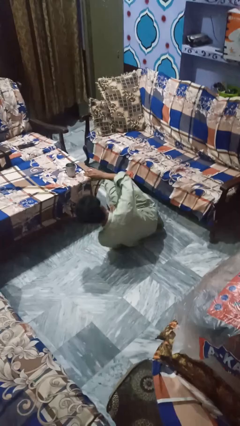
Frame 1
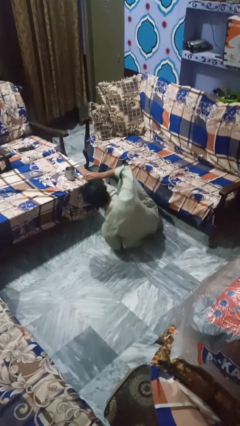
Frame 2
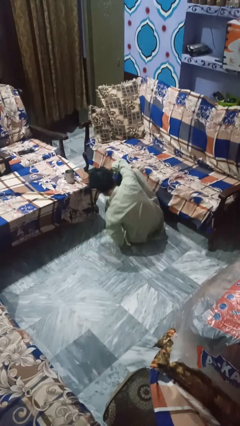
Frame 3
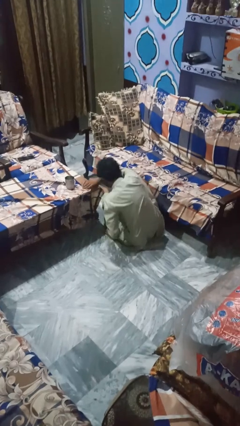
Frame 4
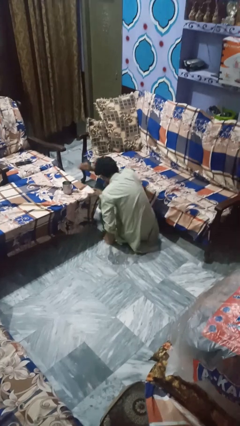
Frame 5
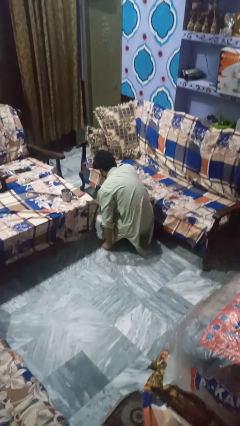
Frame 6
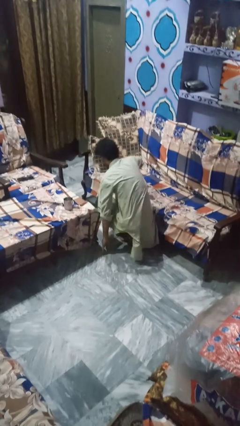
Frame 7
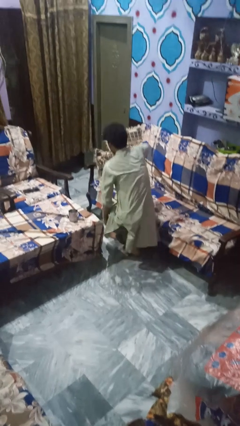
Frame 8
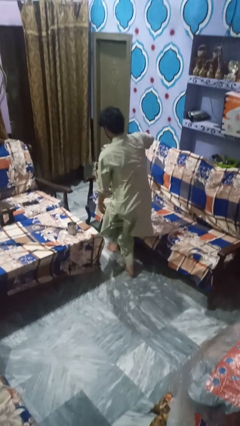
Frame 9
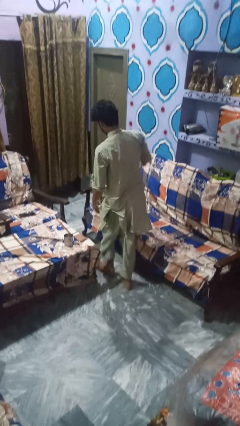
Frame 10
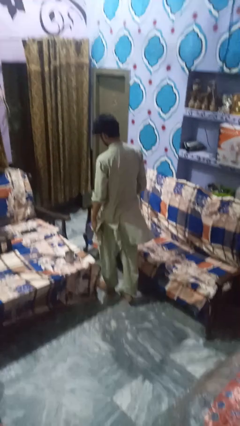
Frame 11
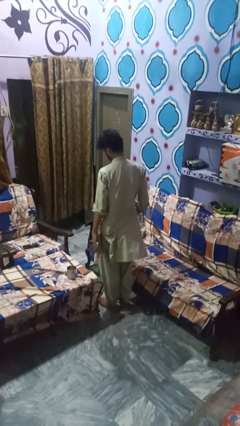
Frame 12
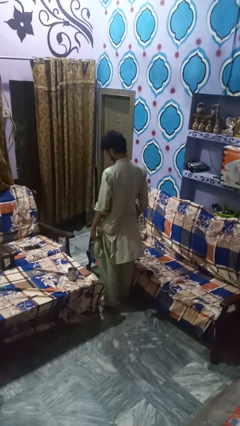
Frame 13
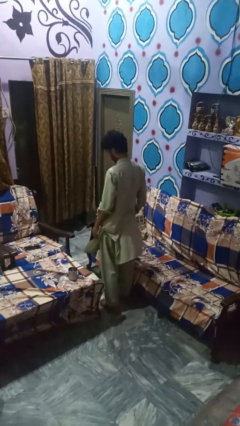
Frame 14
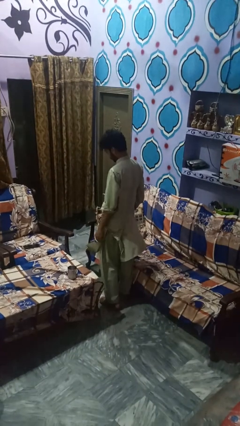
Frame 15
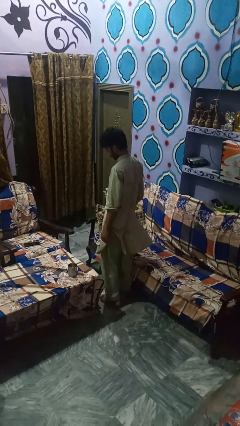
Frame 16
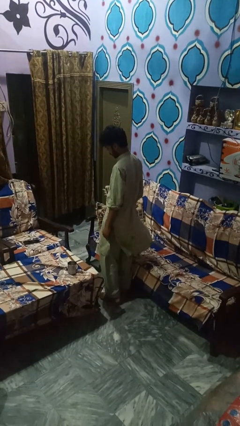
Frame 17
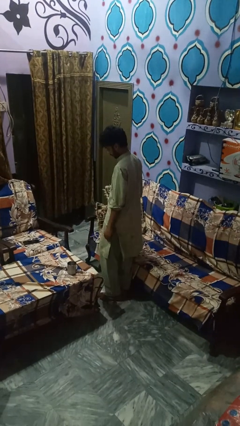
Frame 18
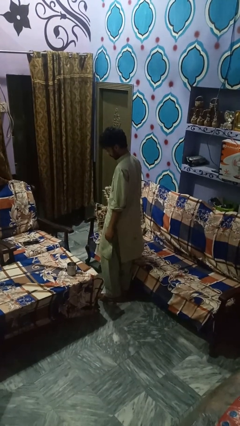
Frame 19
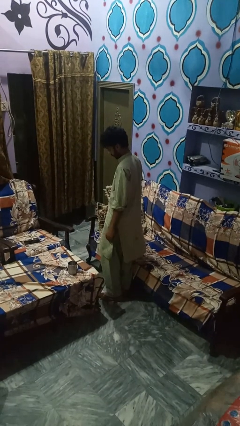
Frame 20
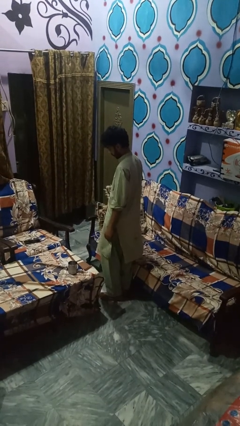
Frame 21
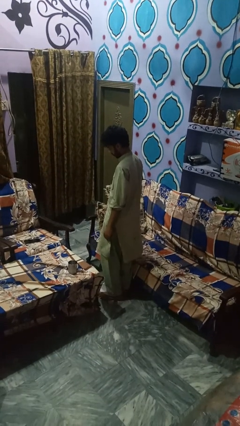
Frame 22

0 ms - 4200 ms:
person stands up from floor

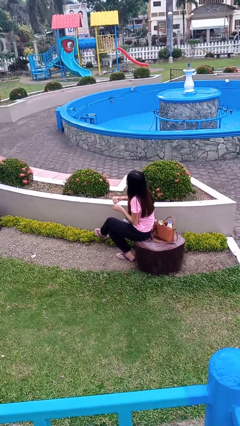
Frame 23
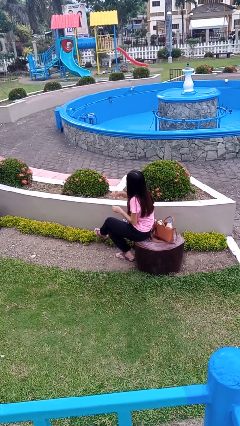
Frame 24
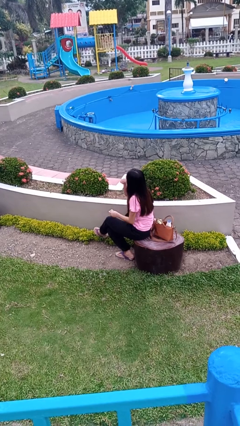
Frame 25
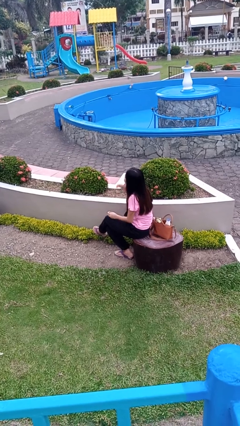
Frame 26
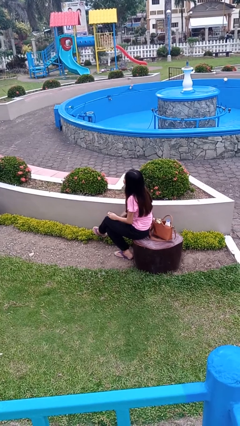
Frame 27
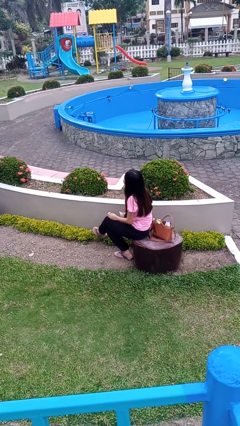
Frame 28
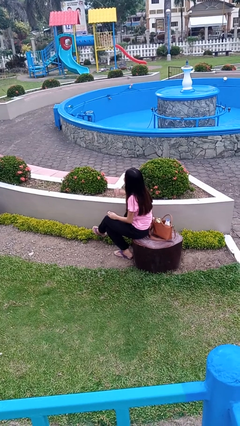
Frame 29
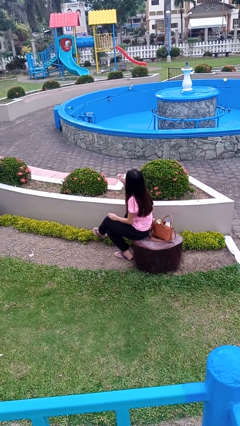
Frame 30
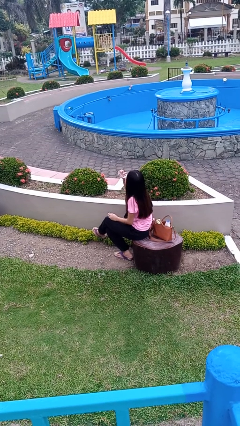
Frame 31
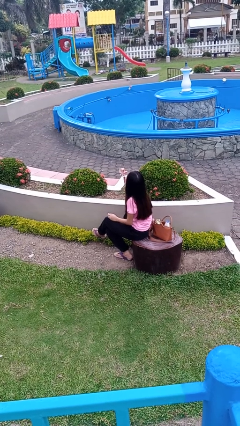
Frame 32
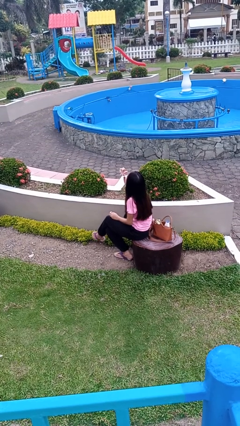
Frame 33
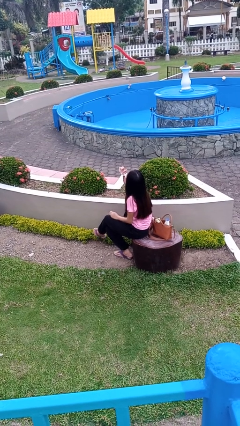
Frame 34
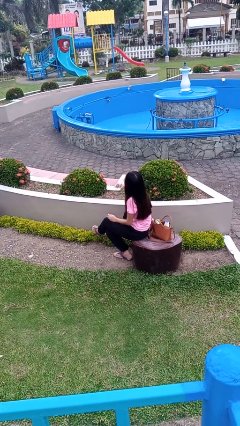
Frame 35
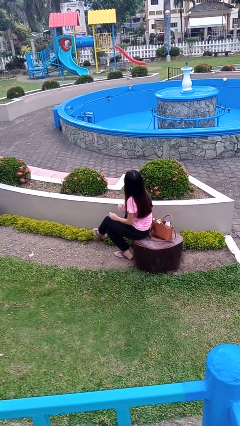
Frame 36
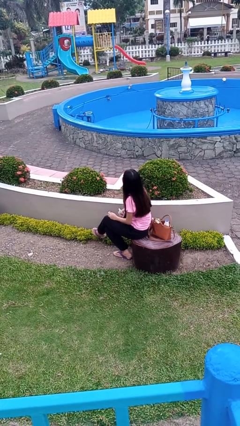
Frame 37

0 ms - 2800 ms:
person drinks from cup

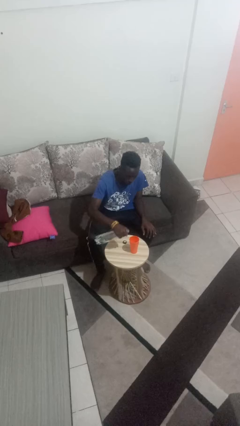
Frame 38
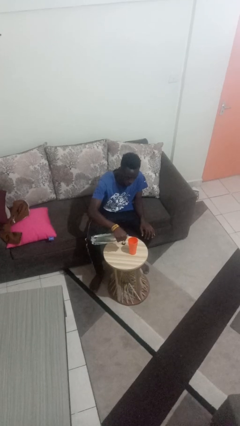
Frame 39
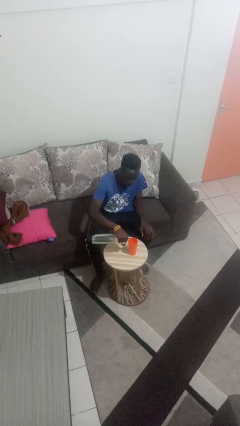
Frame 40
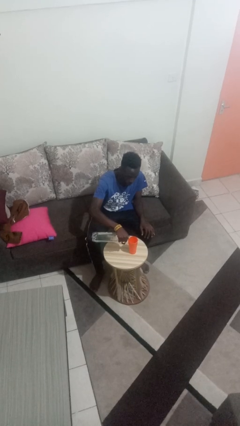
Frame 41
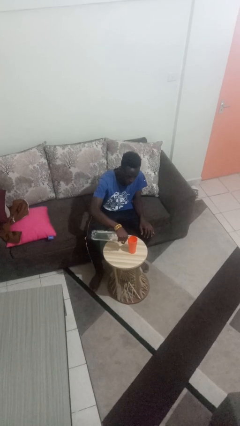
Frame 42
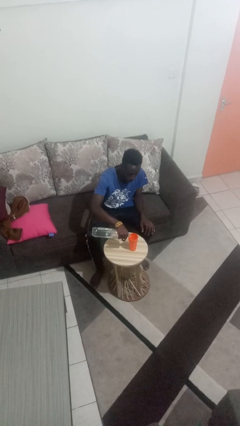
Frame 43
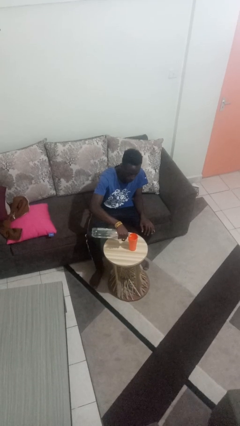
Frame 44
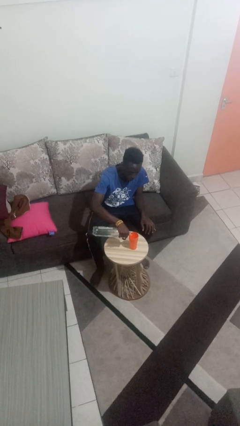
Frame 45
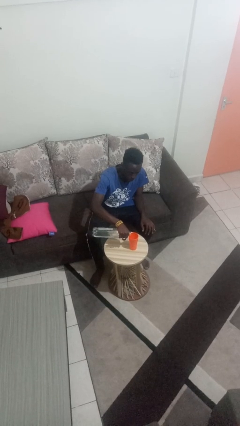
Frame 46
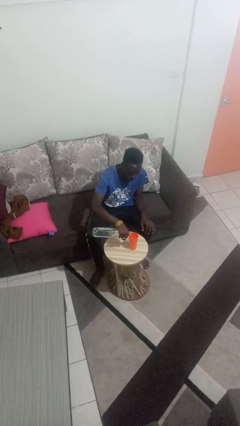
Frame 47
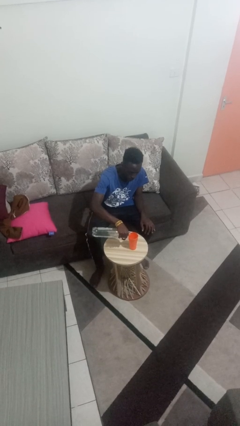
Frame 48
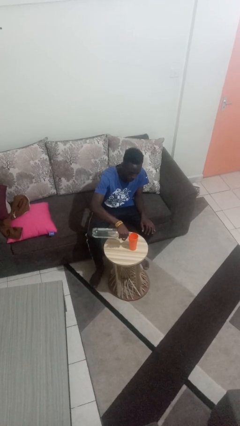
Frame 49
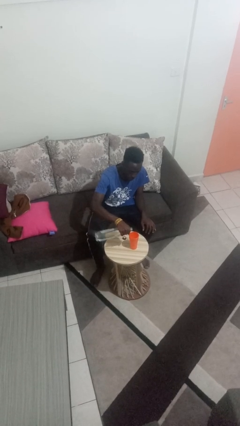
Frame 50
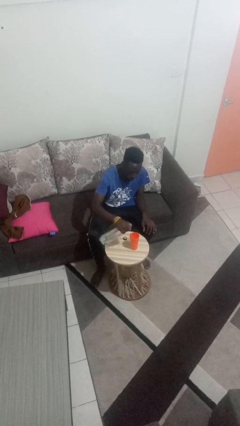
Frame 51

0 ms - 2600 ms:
person pours liquid into cup

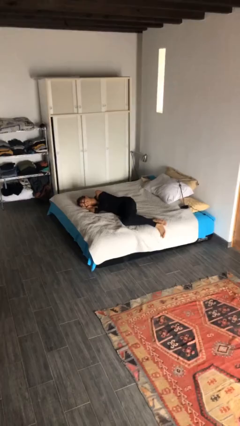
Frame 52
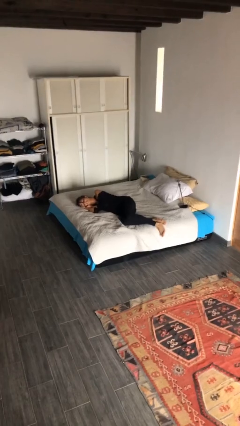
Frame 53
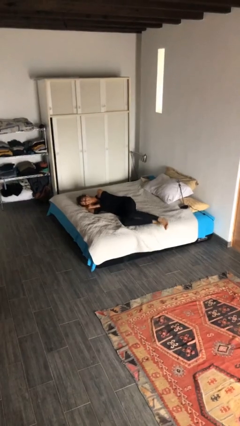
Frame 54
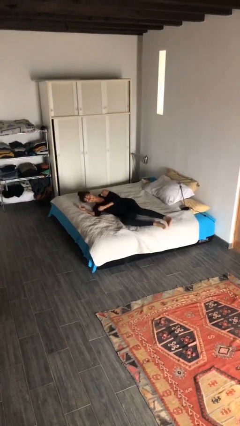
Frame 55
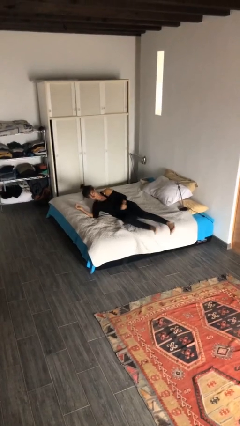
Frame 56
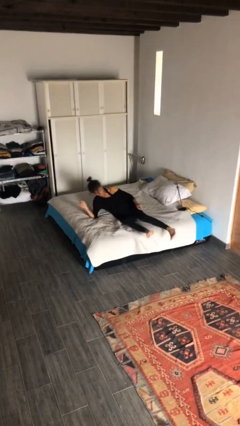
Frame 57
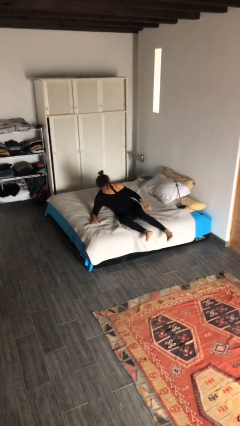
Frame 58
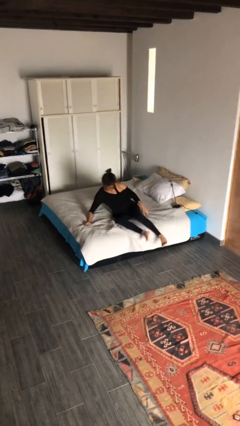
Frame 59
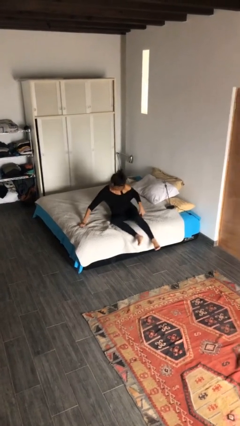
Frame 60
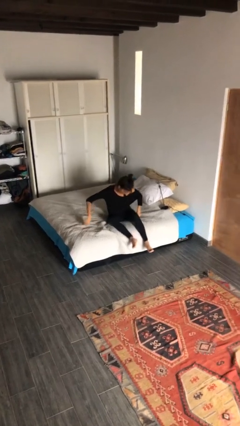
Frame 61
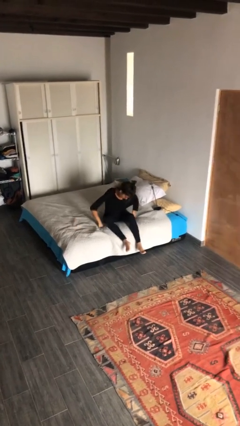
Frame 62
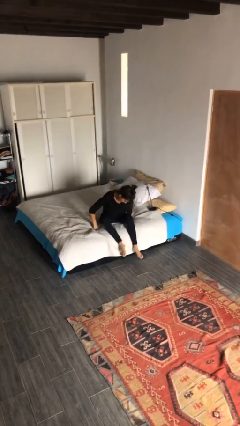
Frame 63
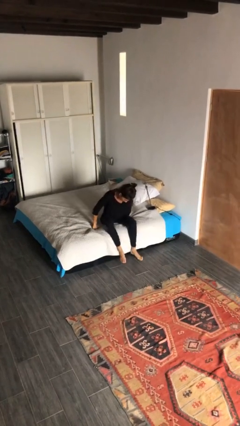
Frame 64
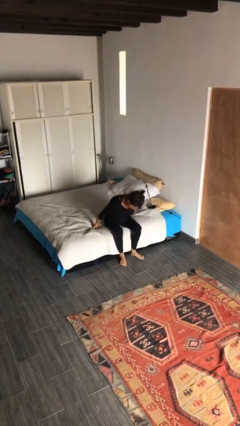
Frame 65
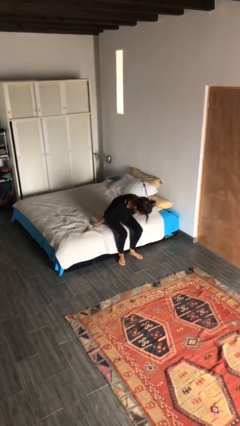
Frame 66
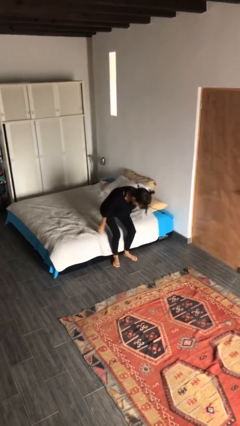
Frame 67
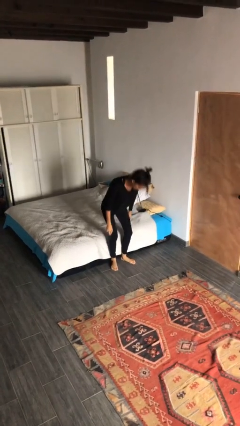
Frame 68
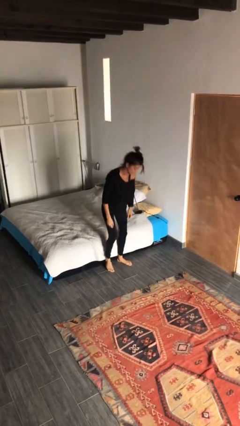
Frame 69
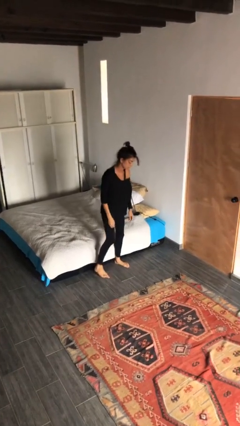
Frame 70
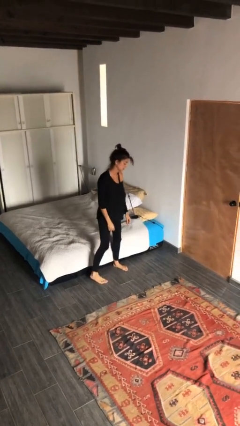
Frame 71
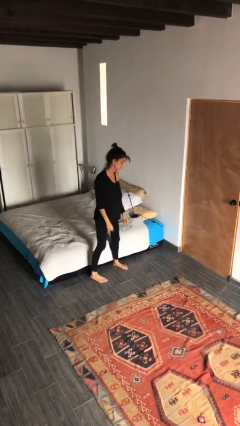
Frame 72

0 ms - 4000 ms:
person stands up

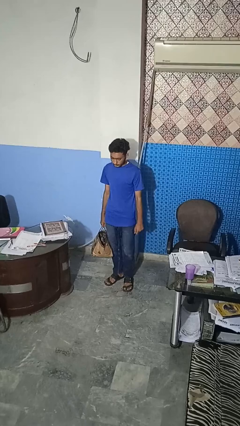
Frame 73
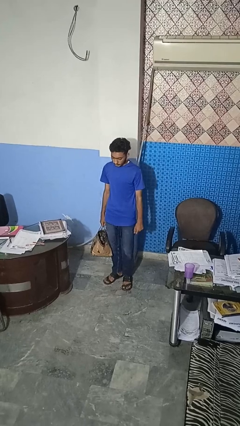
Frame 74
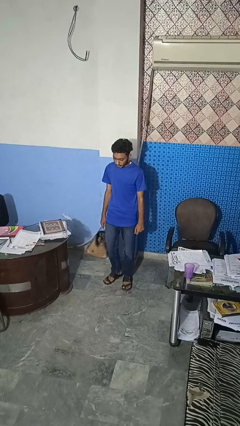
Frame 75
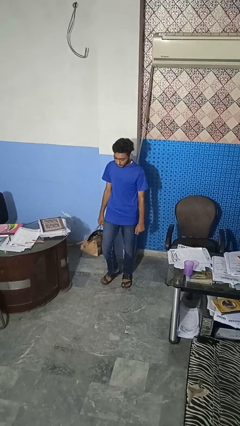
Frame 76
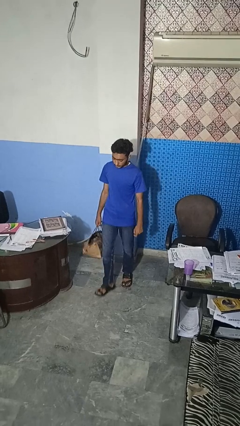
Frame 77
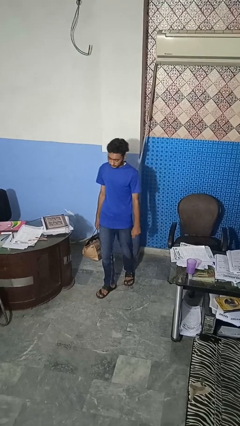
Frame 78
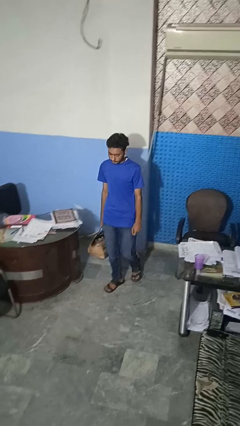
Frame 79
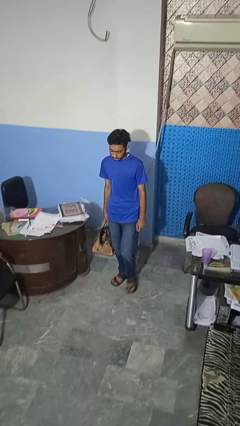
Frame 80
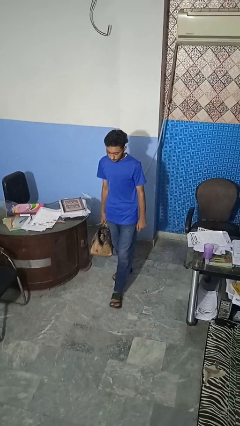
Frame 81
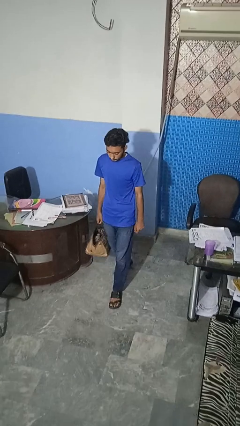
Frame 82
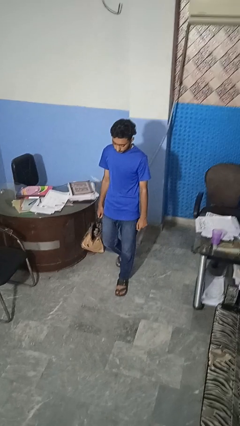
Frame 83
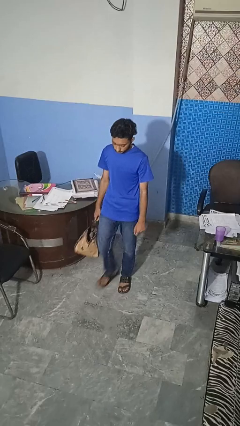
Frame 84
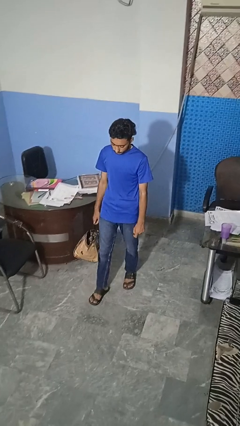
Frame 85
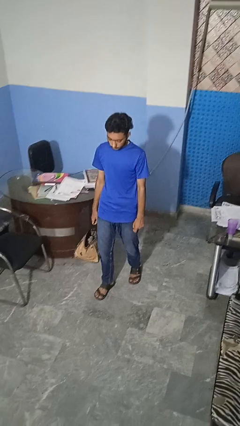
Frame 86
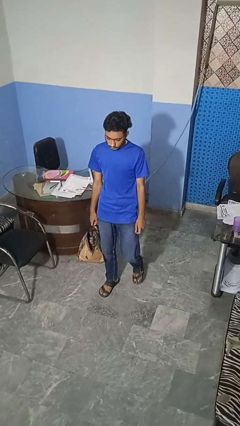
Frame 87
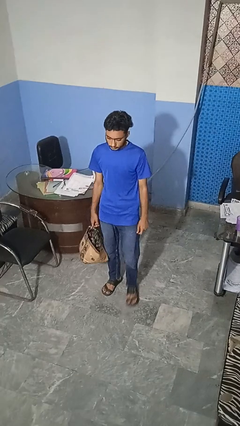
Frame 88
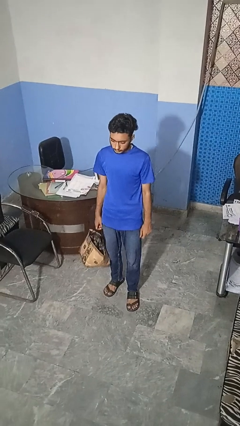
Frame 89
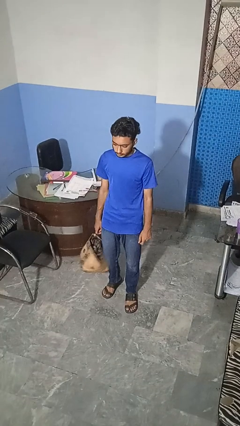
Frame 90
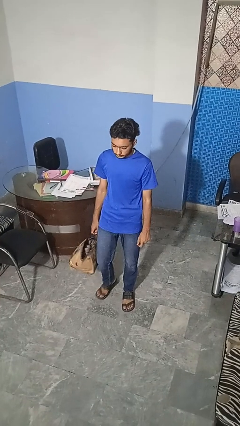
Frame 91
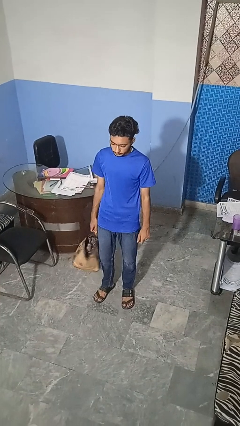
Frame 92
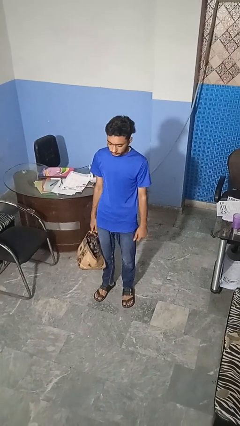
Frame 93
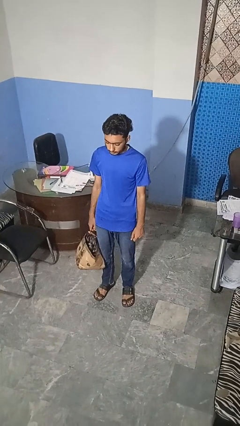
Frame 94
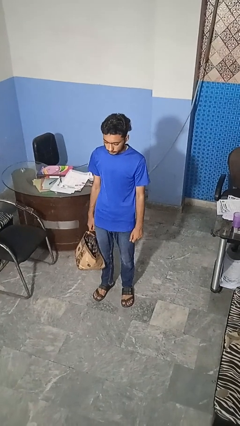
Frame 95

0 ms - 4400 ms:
person carries groceries
